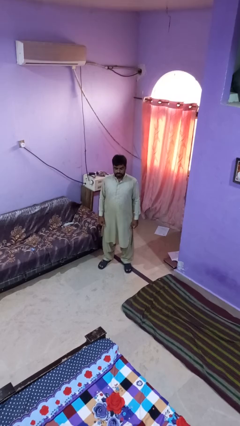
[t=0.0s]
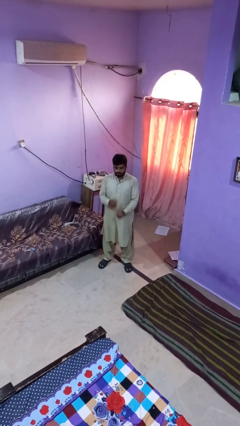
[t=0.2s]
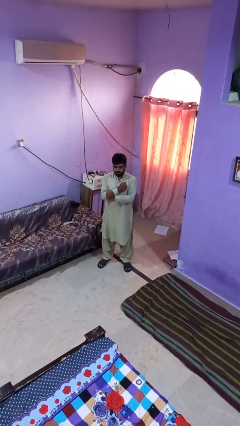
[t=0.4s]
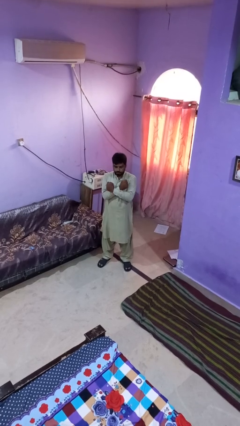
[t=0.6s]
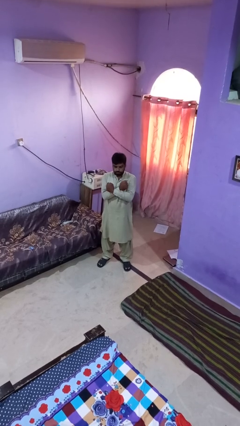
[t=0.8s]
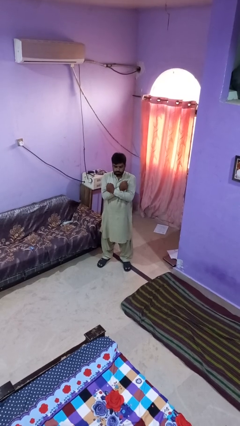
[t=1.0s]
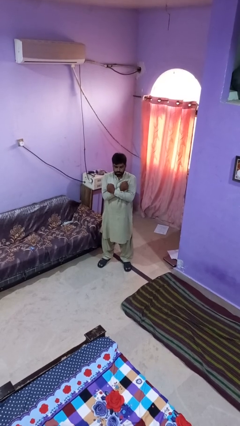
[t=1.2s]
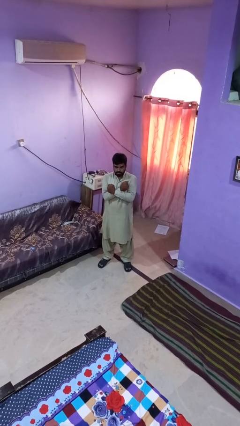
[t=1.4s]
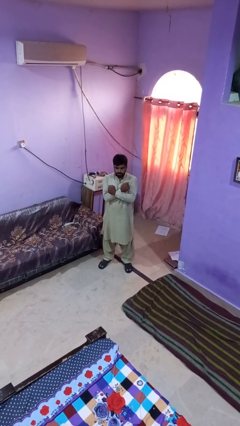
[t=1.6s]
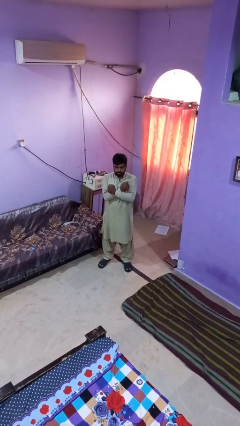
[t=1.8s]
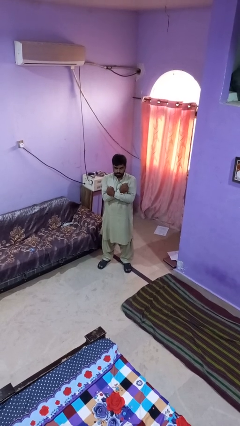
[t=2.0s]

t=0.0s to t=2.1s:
person gestures arms x

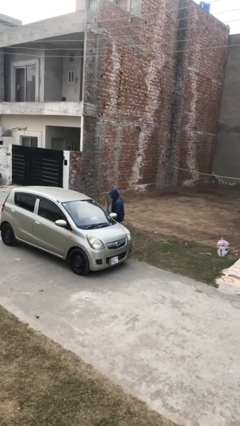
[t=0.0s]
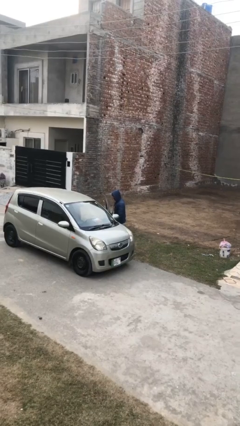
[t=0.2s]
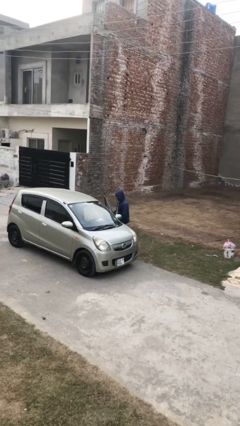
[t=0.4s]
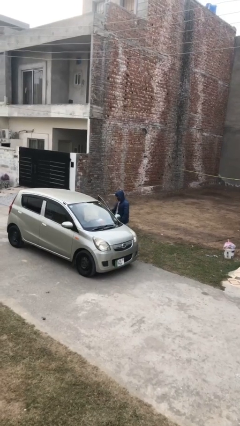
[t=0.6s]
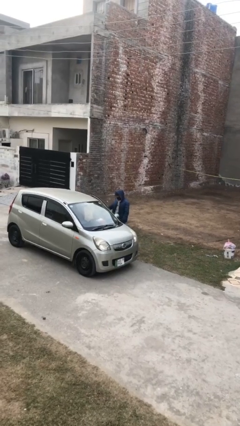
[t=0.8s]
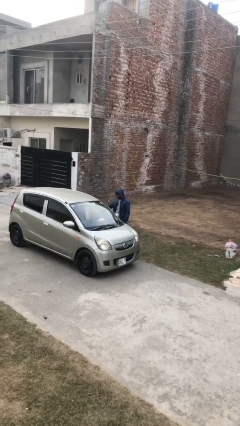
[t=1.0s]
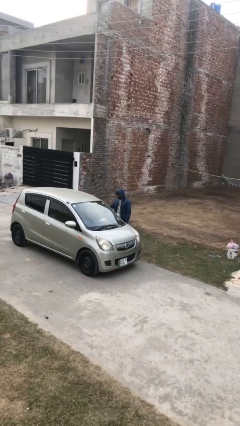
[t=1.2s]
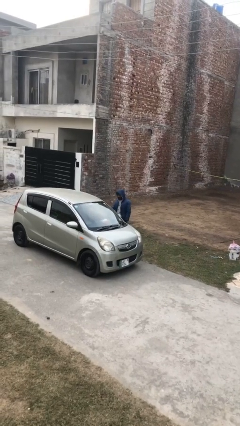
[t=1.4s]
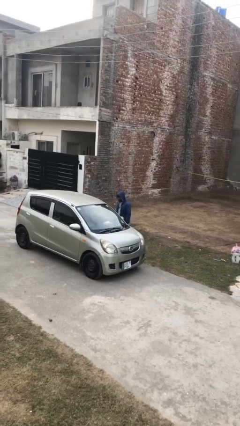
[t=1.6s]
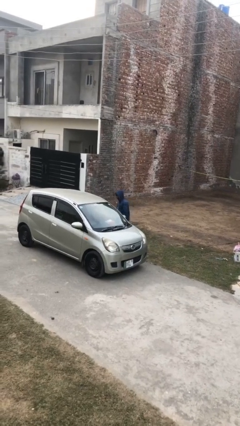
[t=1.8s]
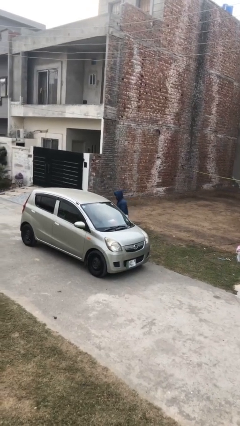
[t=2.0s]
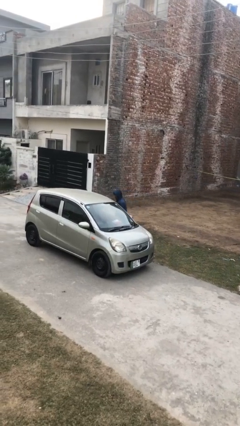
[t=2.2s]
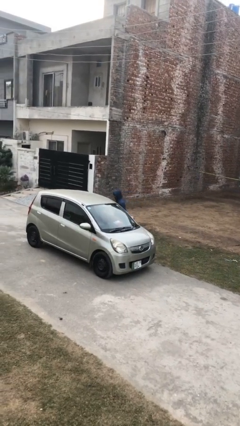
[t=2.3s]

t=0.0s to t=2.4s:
person closes car door

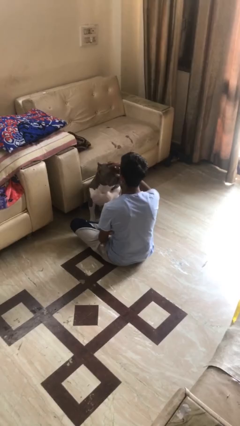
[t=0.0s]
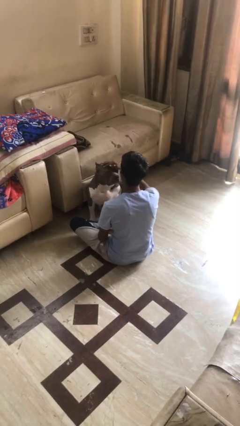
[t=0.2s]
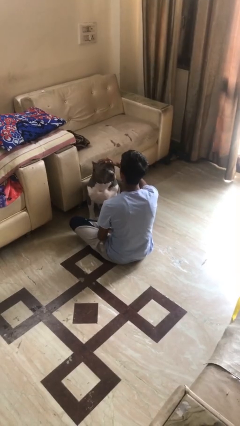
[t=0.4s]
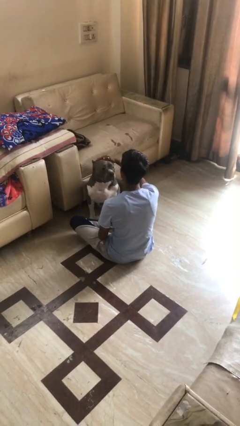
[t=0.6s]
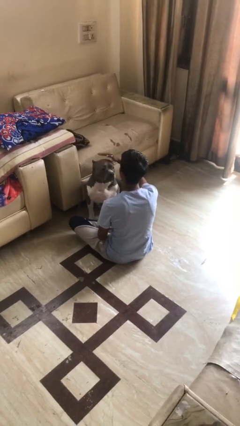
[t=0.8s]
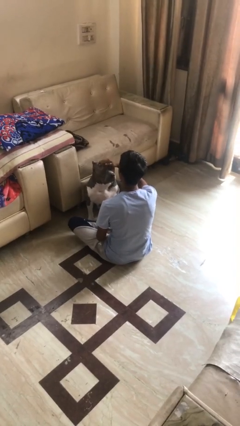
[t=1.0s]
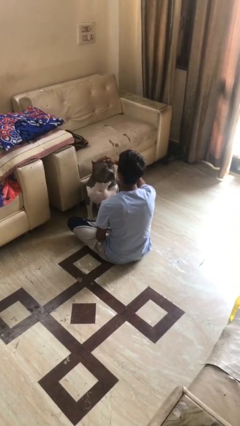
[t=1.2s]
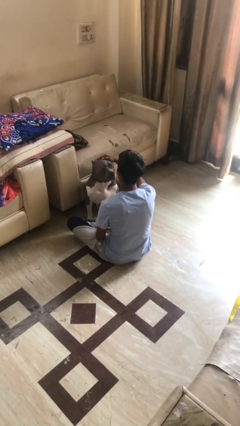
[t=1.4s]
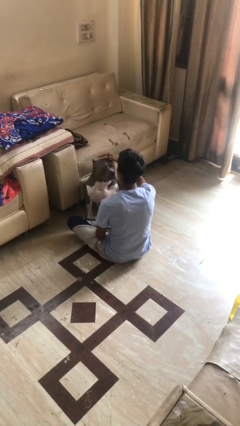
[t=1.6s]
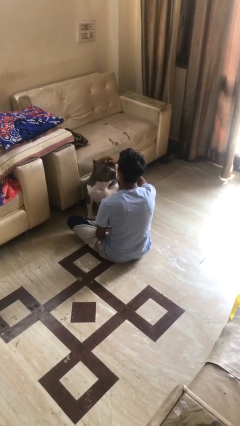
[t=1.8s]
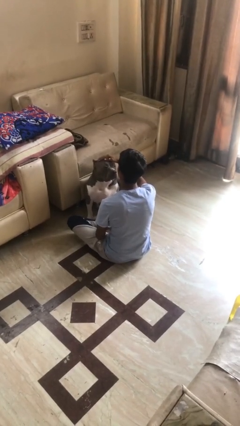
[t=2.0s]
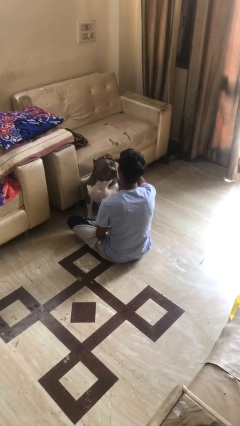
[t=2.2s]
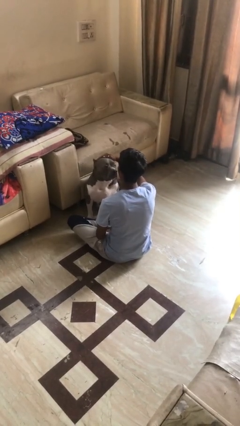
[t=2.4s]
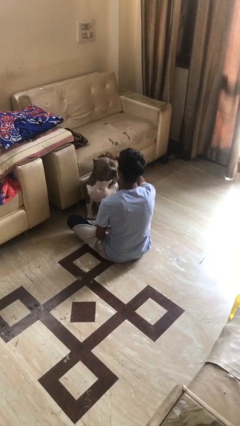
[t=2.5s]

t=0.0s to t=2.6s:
person pets dog

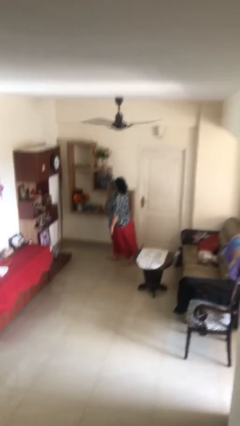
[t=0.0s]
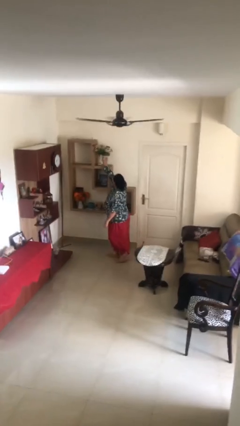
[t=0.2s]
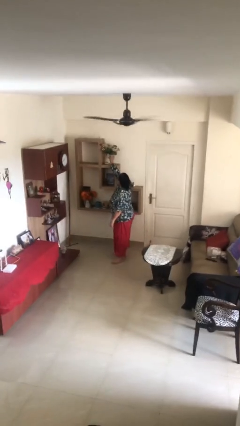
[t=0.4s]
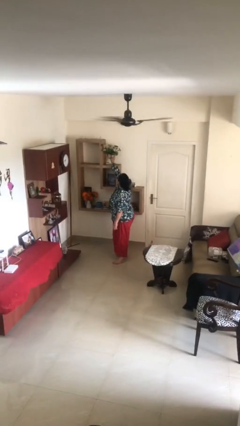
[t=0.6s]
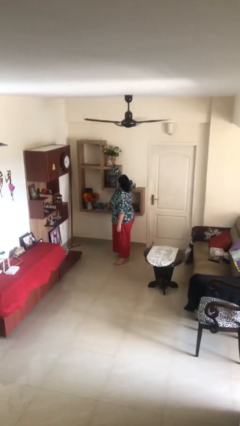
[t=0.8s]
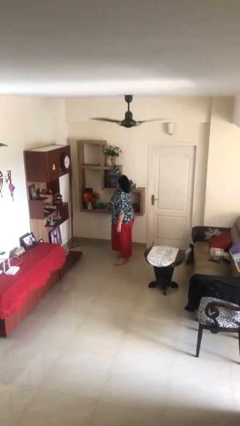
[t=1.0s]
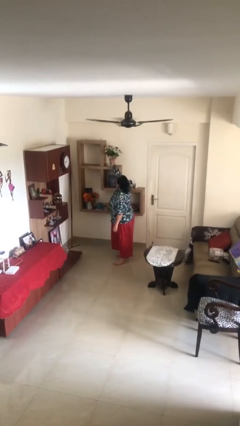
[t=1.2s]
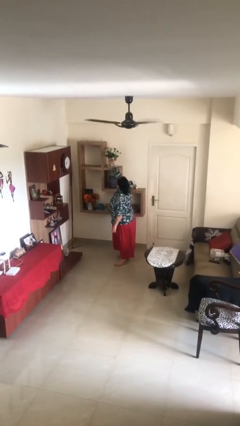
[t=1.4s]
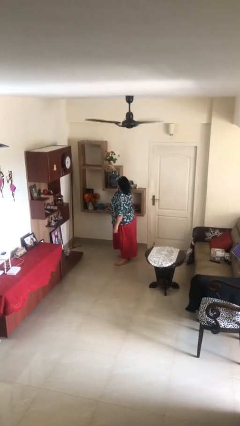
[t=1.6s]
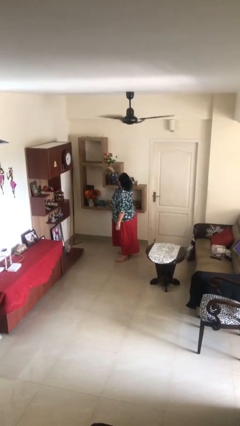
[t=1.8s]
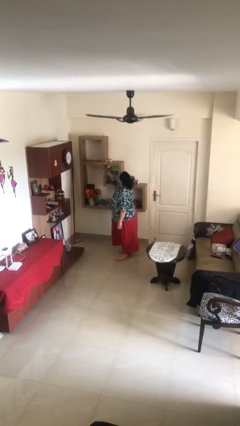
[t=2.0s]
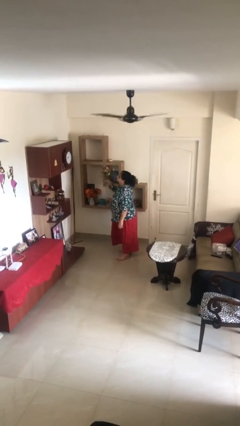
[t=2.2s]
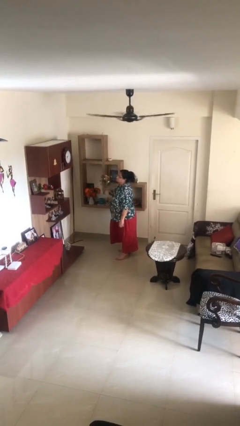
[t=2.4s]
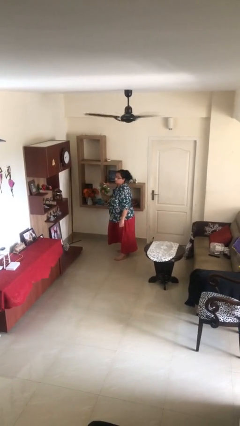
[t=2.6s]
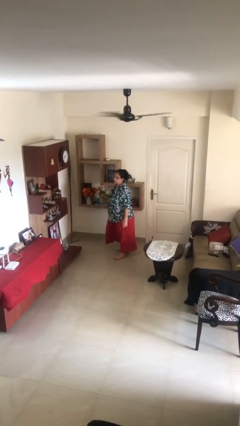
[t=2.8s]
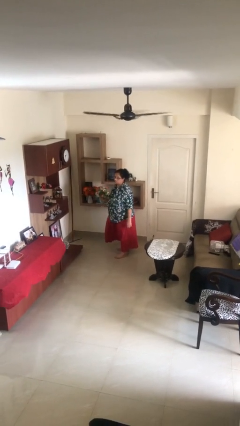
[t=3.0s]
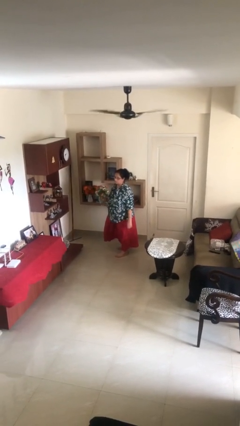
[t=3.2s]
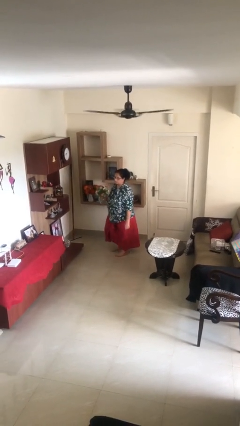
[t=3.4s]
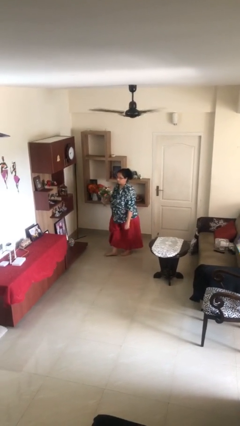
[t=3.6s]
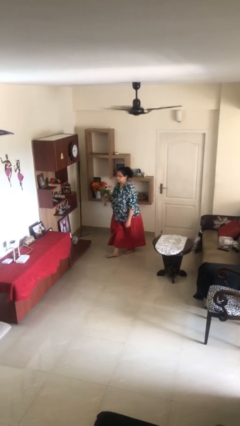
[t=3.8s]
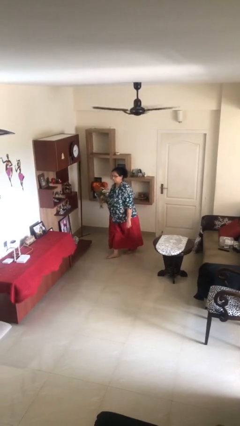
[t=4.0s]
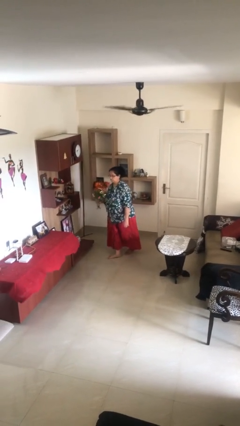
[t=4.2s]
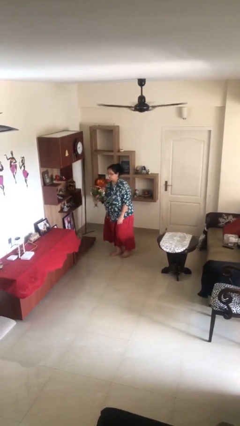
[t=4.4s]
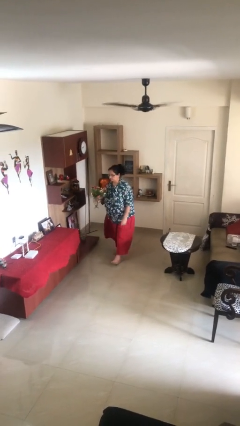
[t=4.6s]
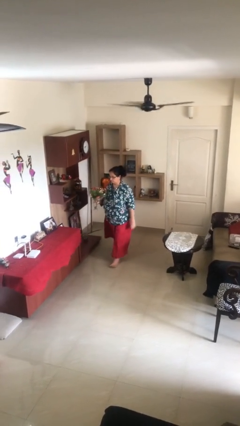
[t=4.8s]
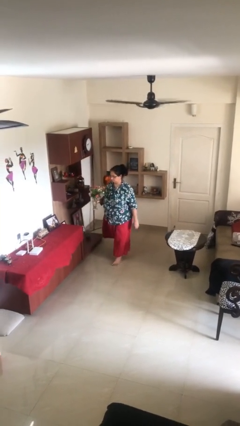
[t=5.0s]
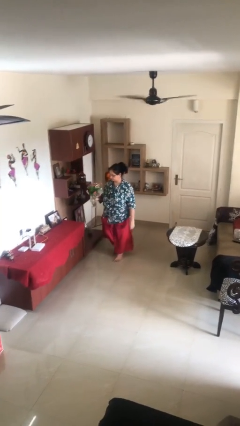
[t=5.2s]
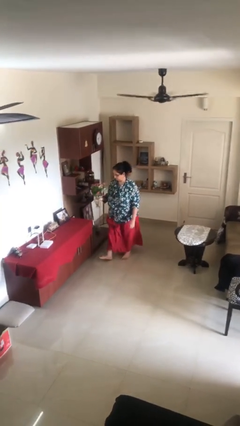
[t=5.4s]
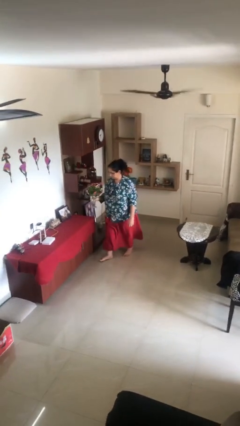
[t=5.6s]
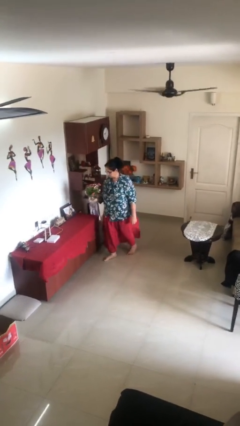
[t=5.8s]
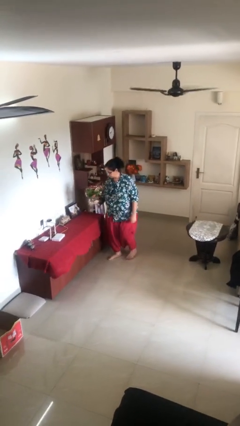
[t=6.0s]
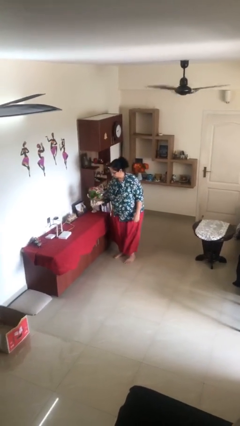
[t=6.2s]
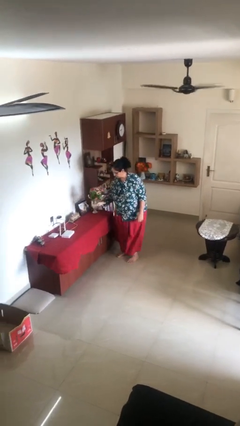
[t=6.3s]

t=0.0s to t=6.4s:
person picks up object from shelf

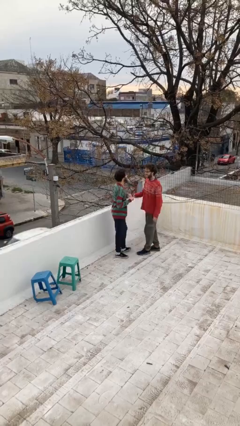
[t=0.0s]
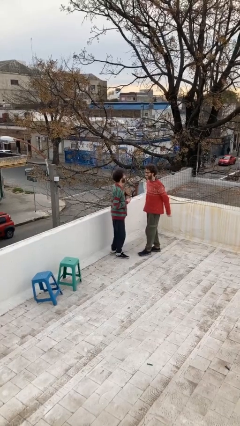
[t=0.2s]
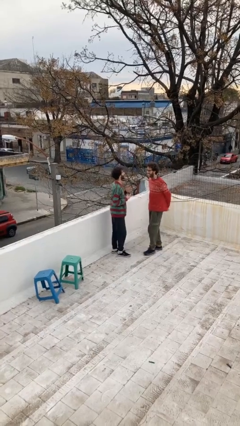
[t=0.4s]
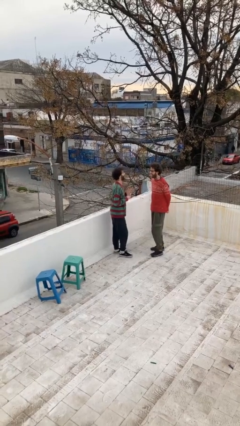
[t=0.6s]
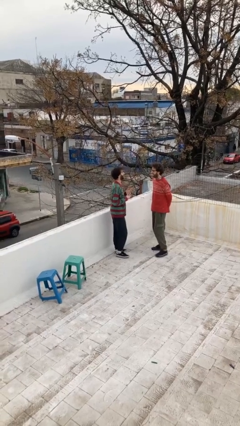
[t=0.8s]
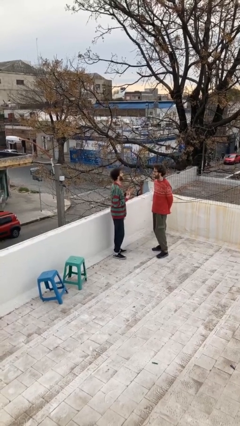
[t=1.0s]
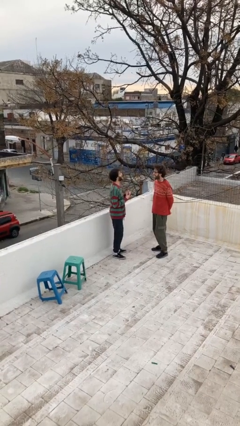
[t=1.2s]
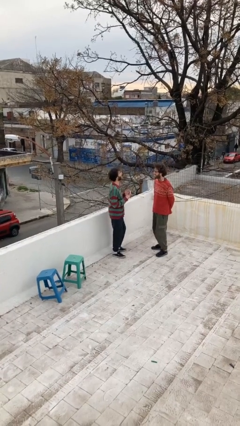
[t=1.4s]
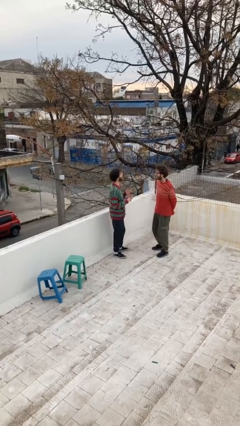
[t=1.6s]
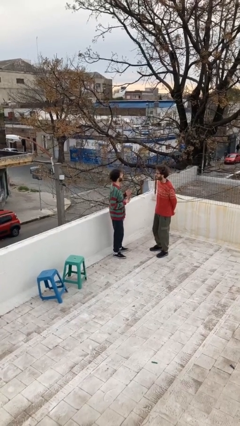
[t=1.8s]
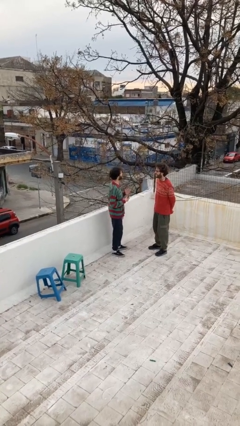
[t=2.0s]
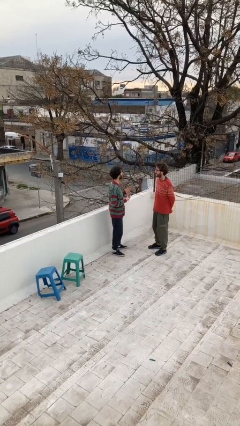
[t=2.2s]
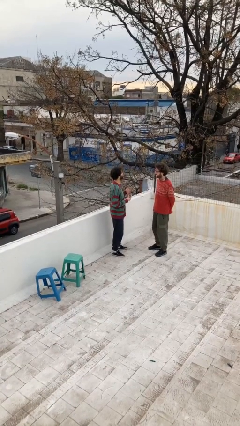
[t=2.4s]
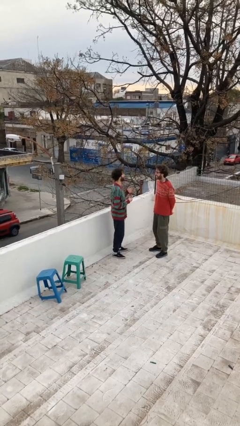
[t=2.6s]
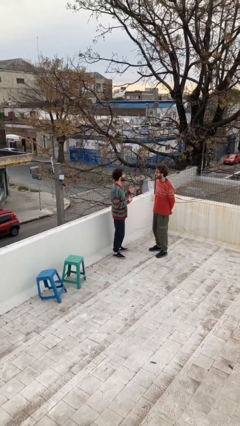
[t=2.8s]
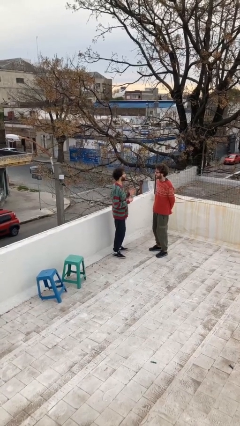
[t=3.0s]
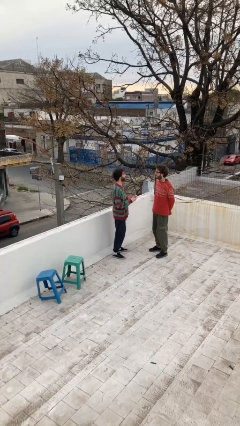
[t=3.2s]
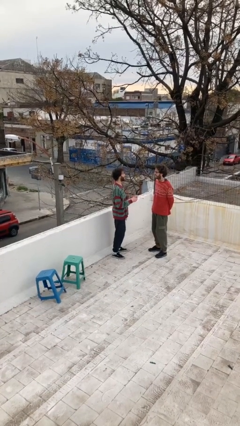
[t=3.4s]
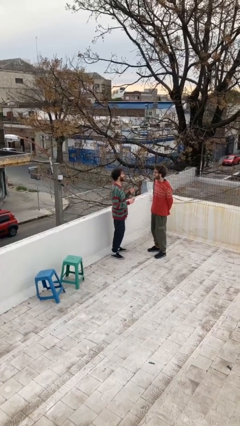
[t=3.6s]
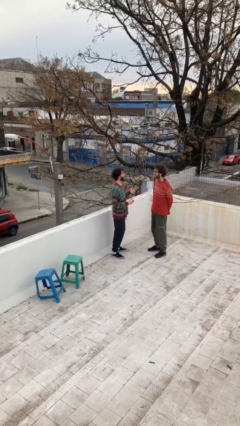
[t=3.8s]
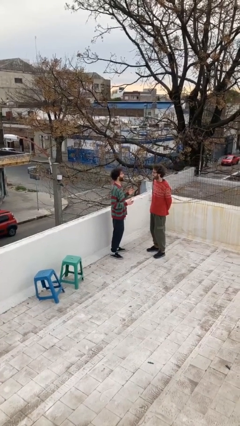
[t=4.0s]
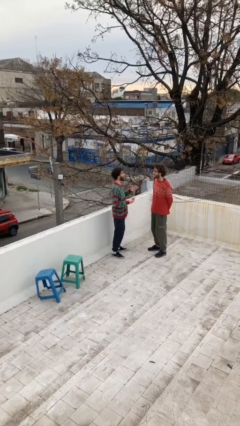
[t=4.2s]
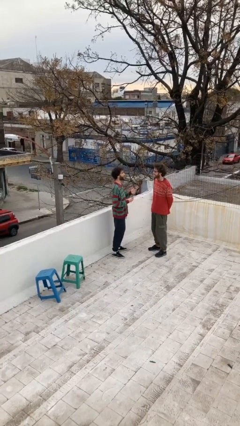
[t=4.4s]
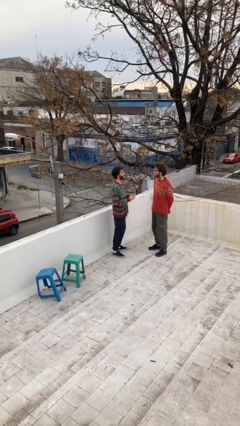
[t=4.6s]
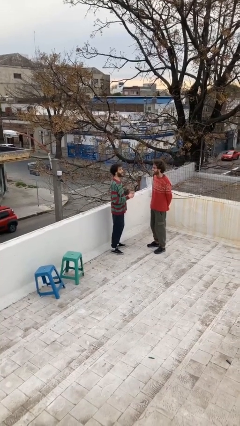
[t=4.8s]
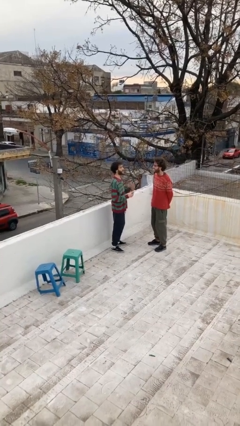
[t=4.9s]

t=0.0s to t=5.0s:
person talks to person
